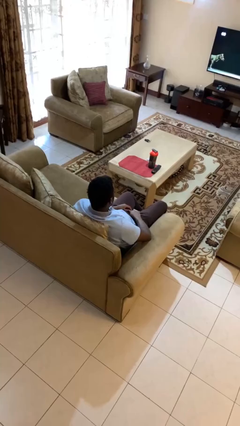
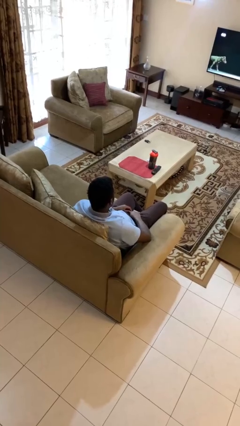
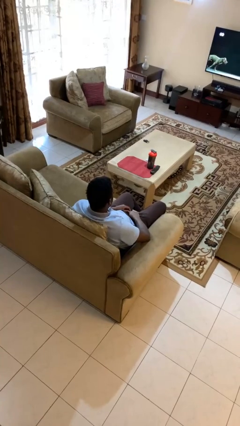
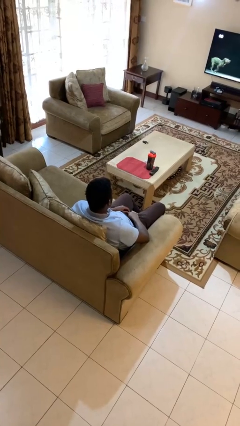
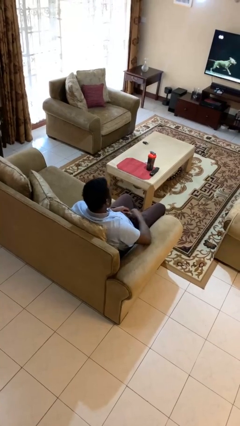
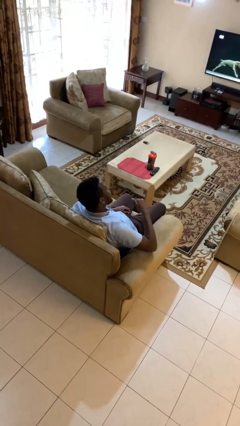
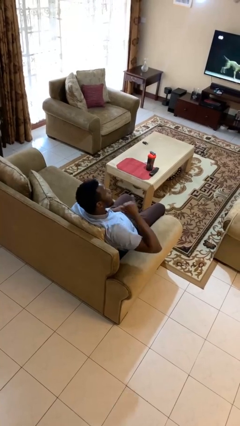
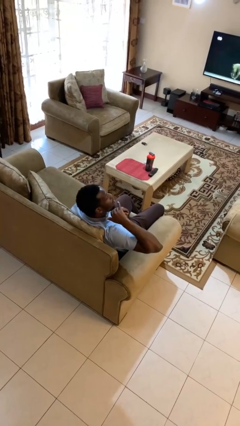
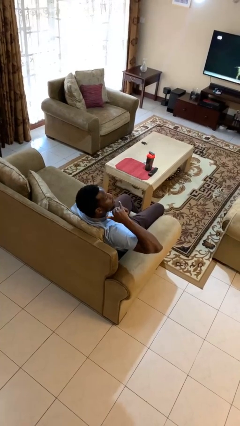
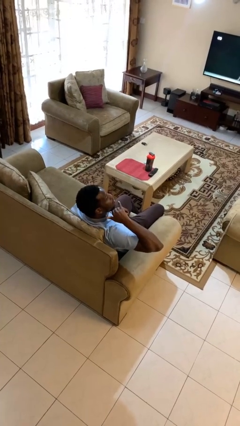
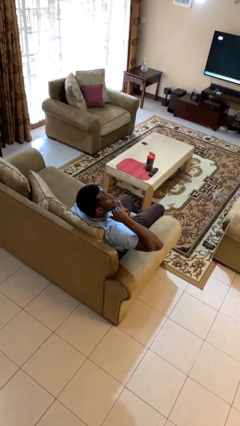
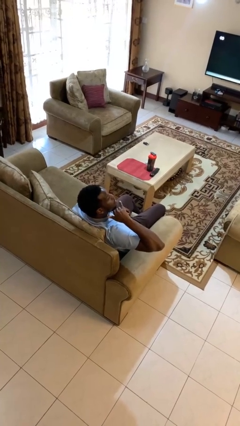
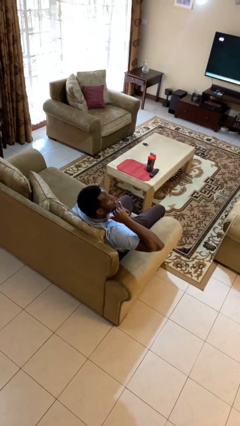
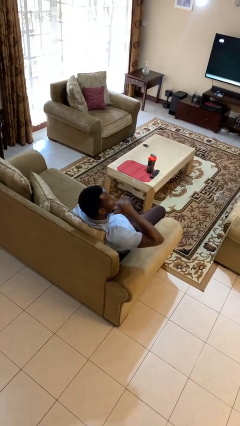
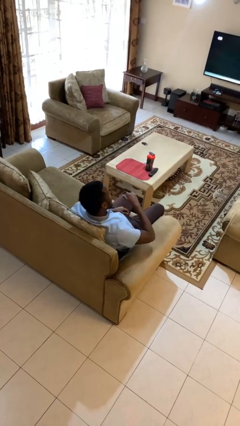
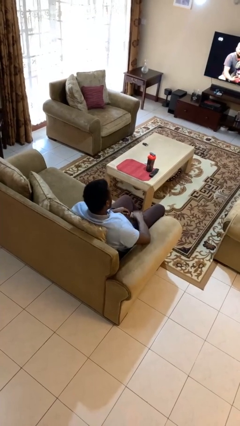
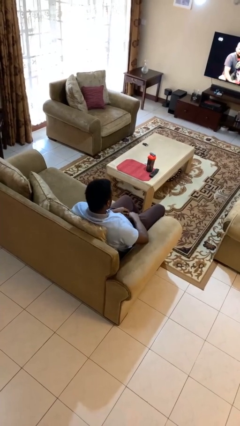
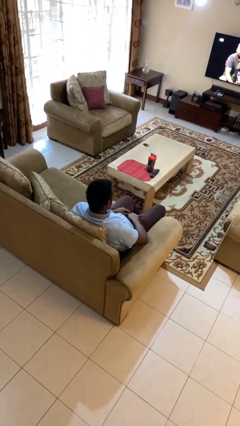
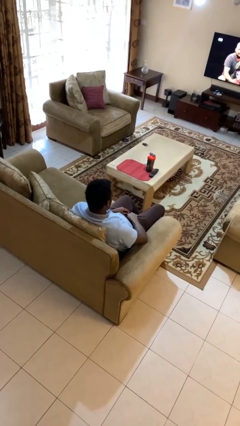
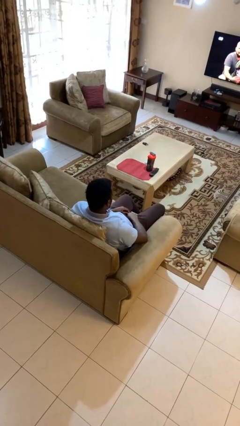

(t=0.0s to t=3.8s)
person gestures call me

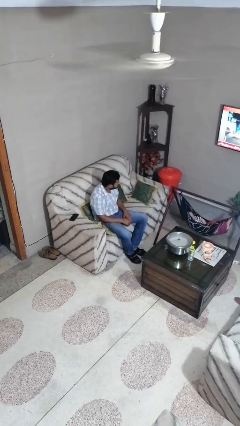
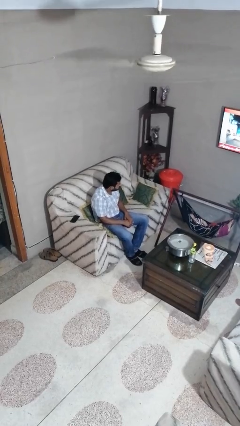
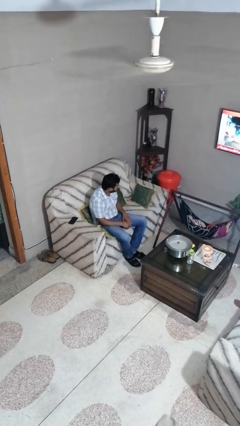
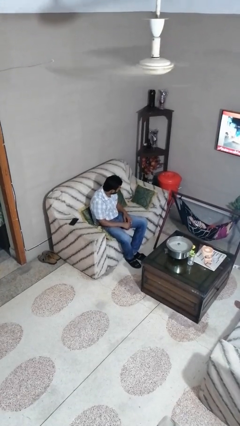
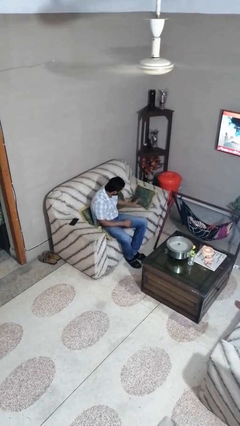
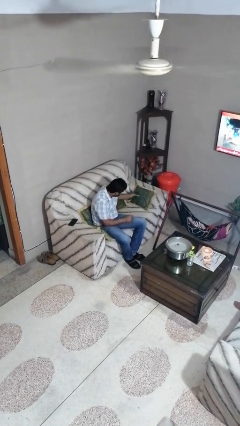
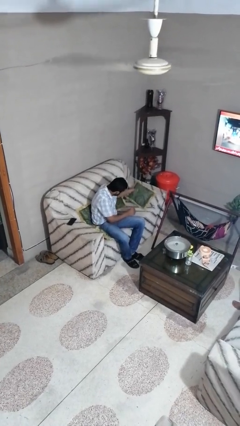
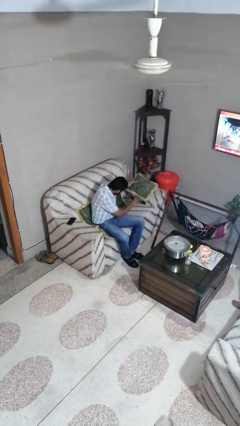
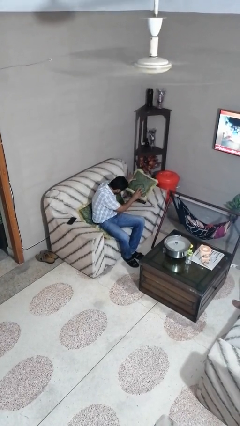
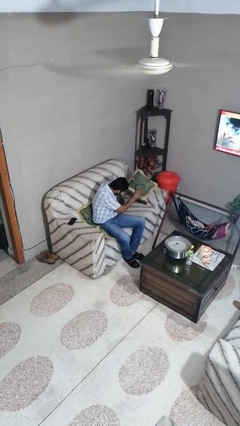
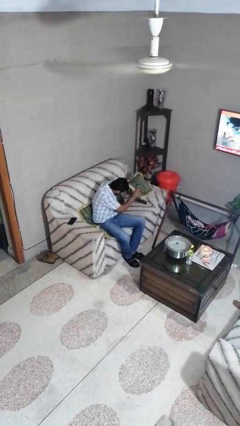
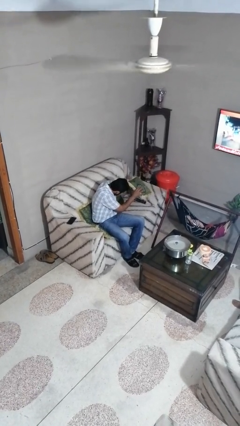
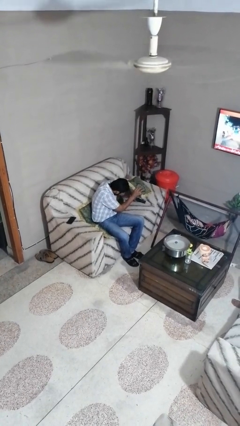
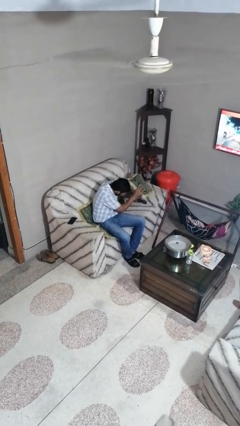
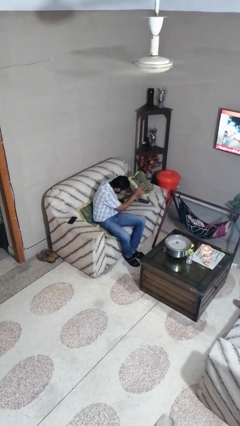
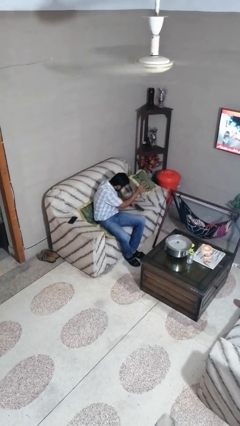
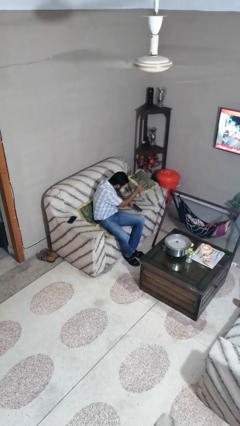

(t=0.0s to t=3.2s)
person searches in couch

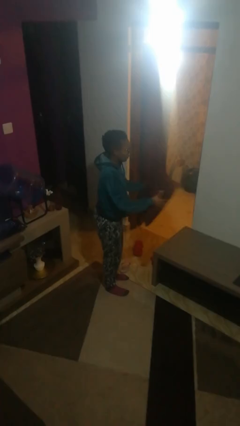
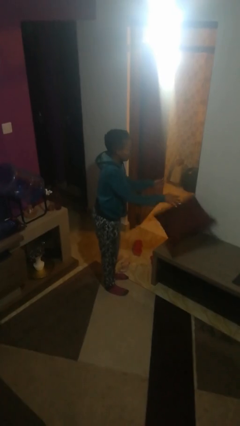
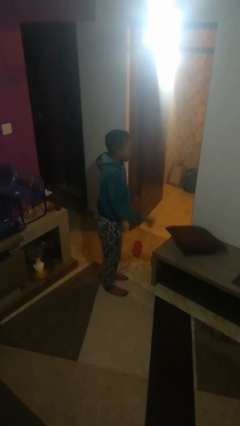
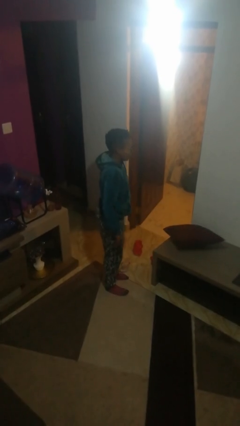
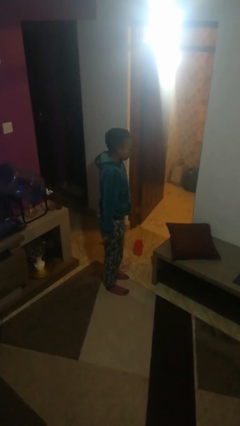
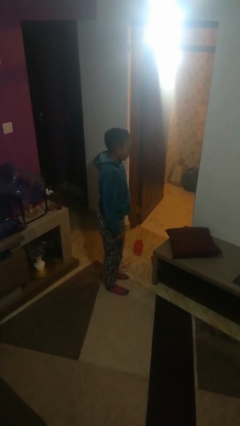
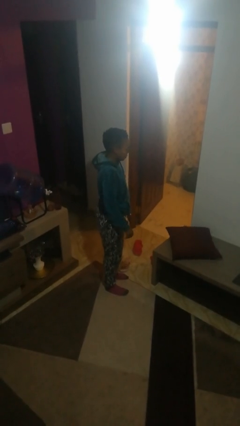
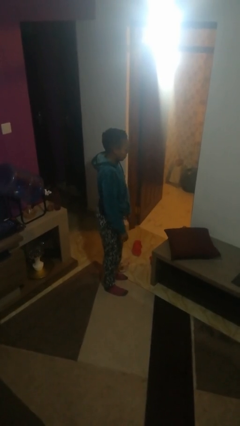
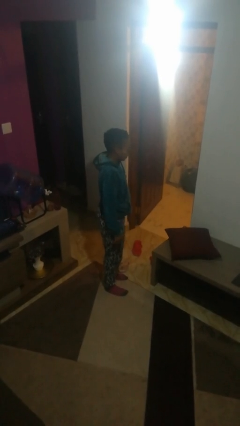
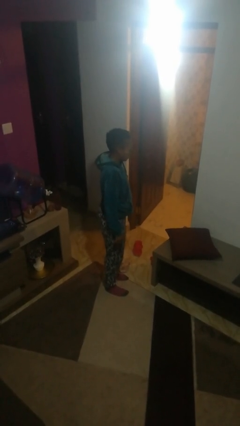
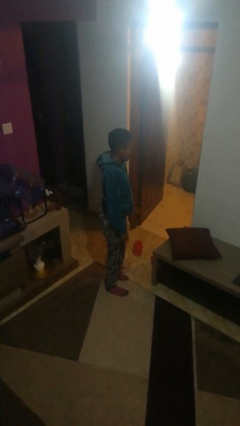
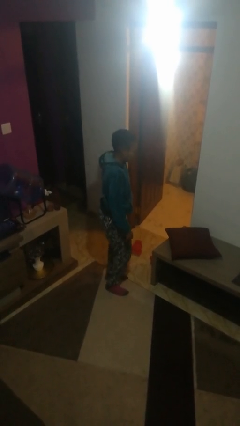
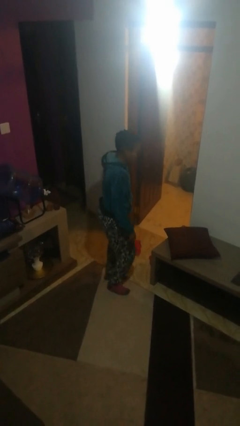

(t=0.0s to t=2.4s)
person throws object on table

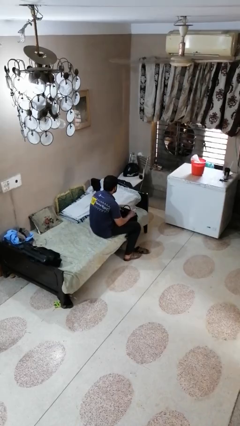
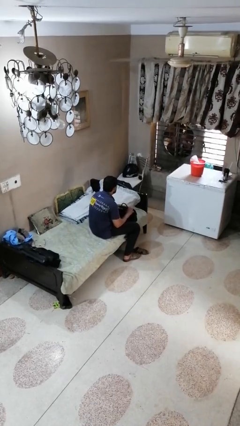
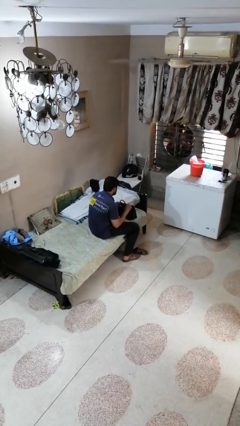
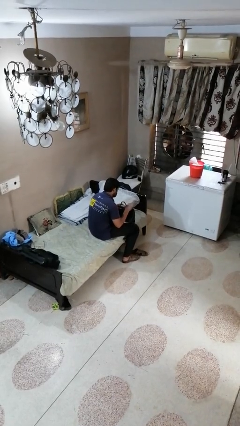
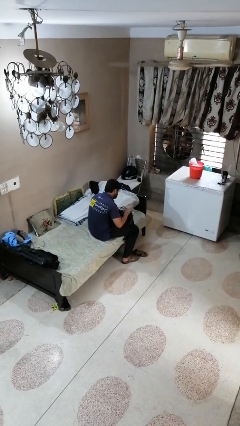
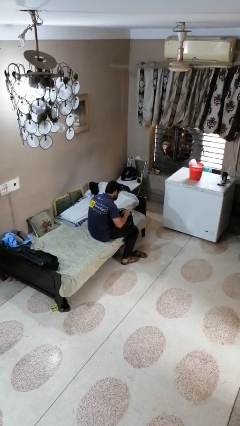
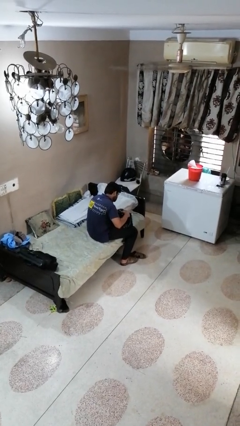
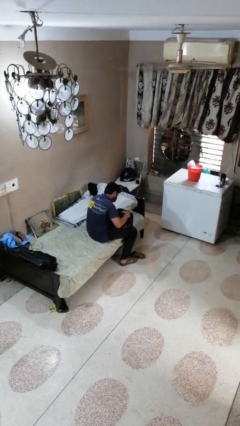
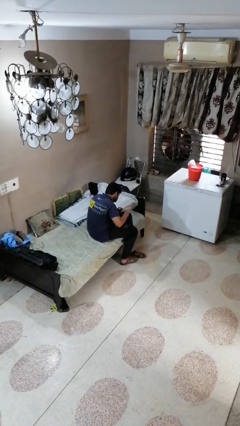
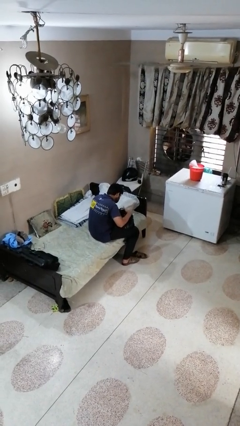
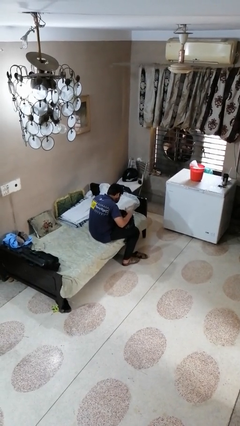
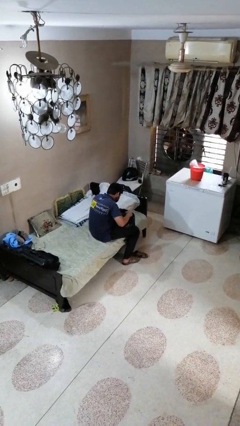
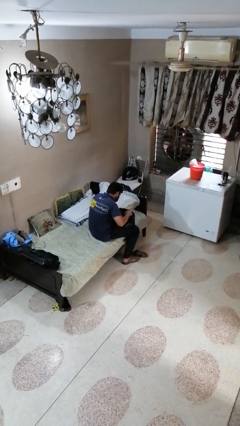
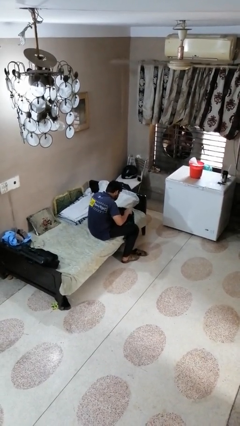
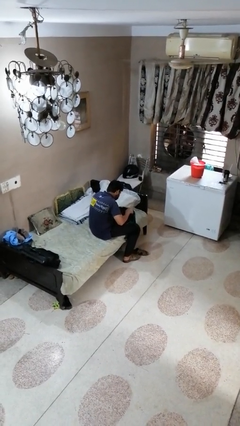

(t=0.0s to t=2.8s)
person searches in purse

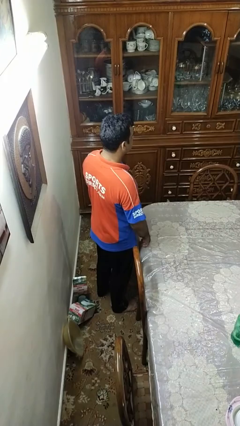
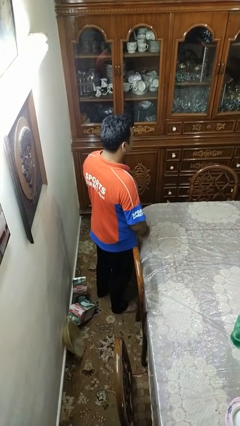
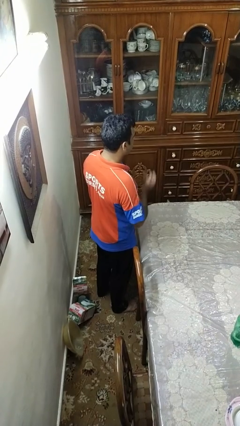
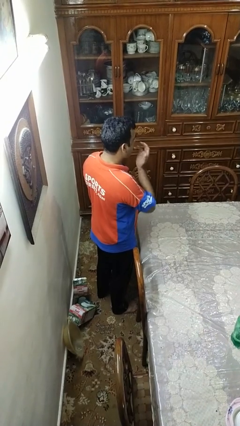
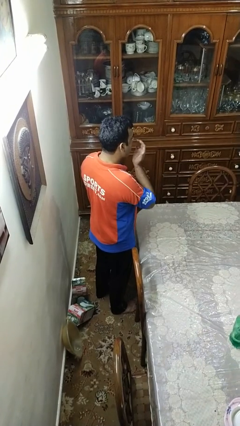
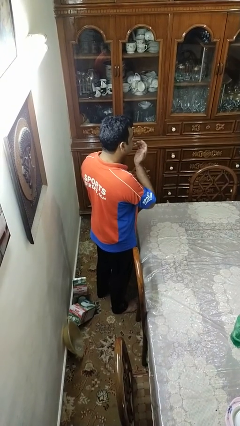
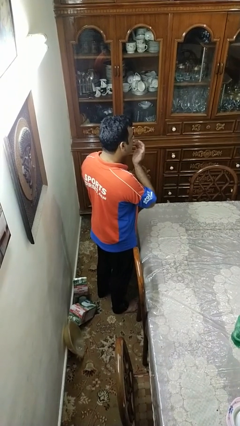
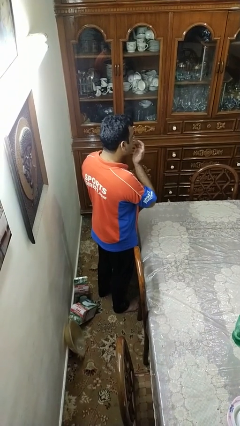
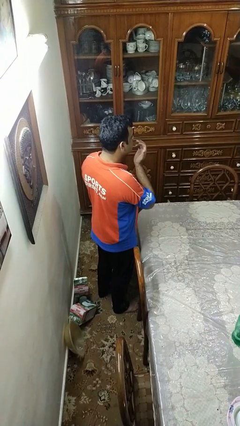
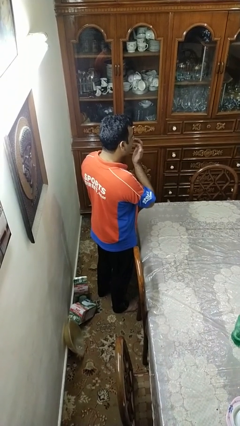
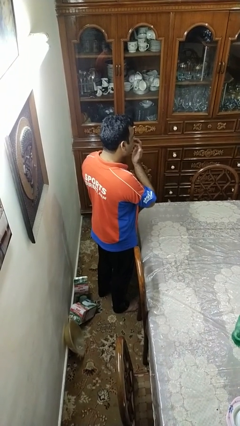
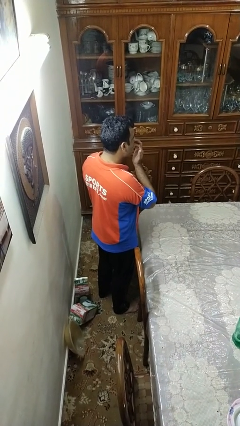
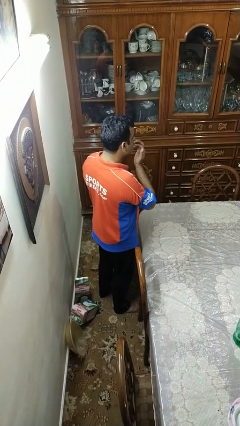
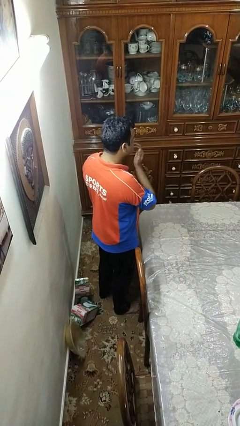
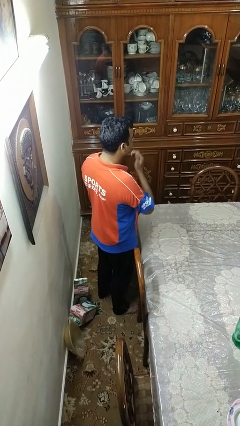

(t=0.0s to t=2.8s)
person licks fingers

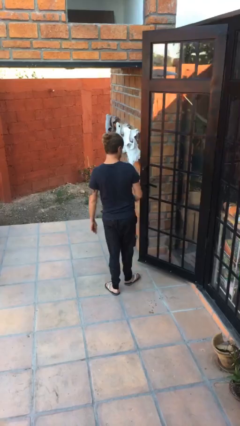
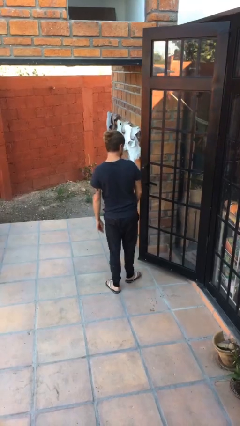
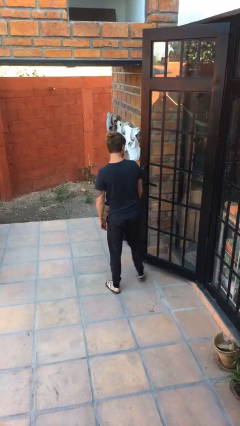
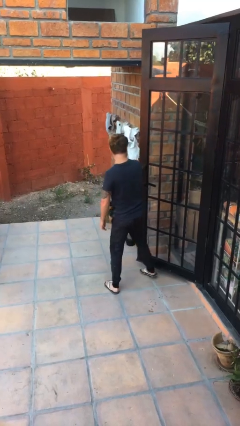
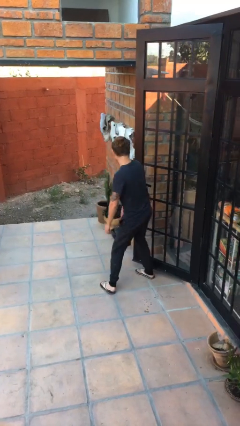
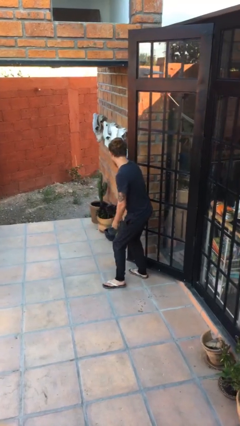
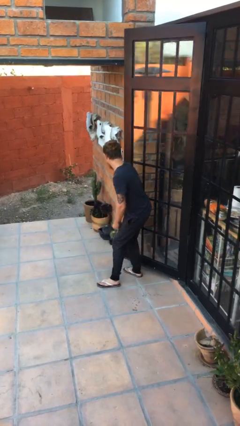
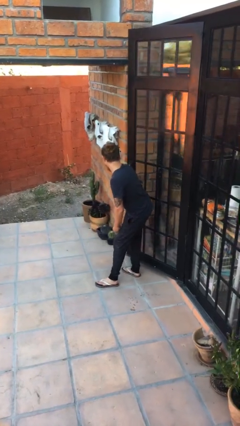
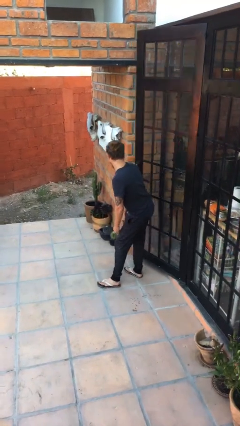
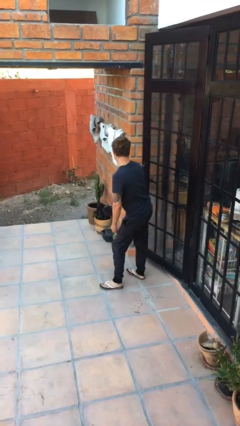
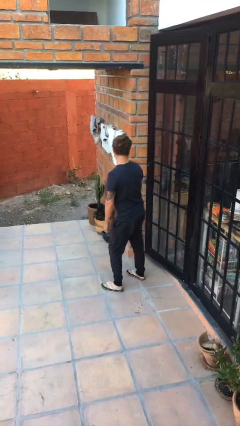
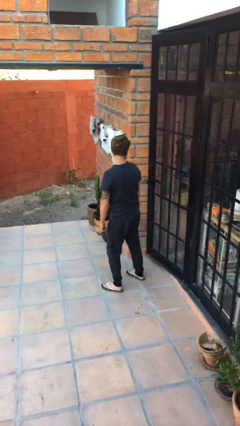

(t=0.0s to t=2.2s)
person closes door with hip
